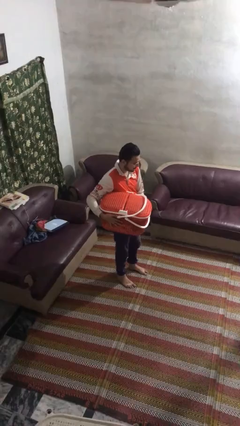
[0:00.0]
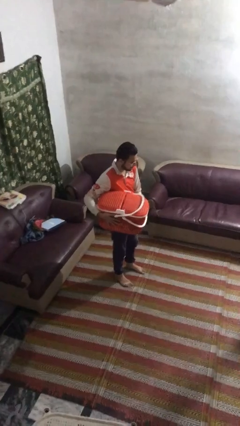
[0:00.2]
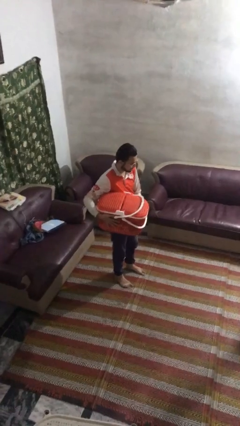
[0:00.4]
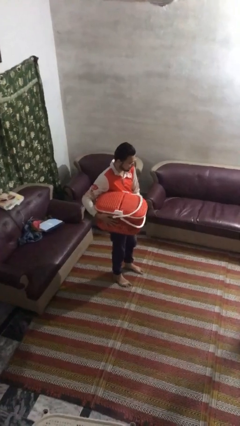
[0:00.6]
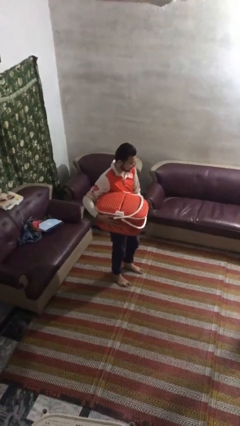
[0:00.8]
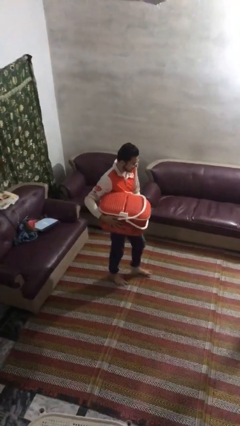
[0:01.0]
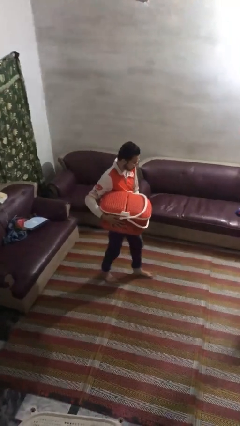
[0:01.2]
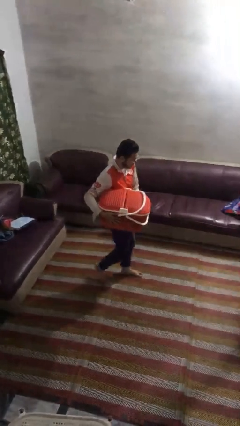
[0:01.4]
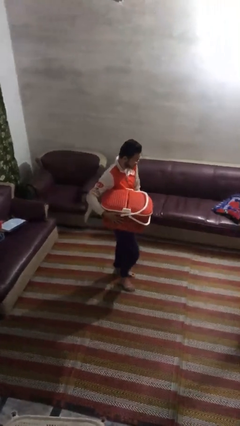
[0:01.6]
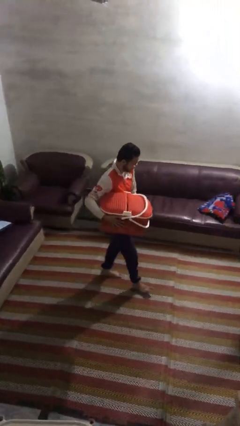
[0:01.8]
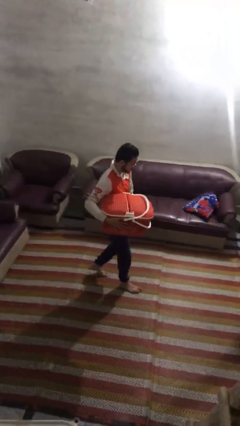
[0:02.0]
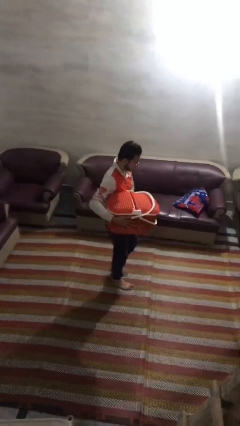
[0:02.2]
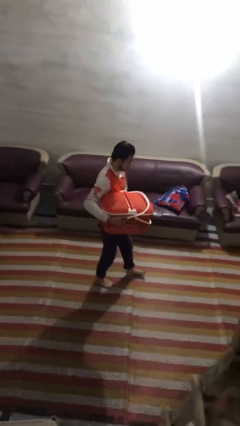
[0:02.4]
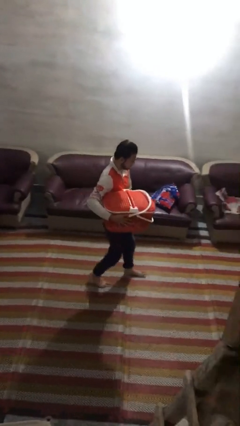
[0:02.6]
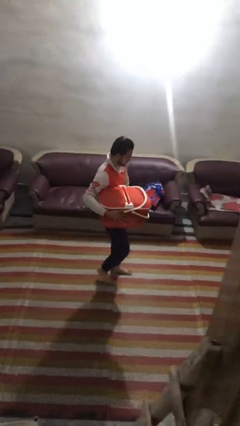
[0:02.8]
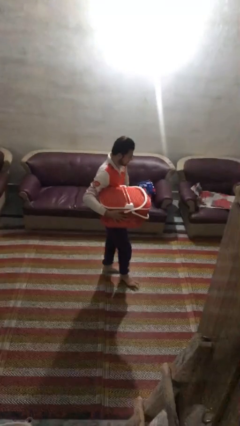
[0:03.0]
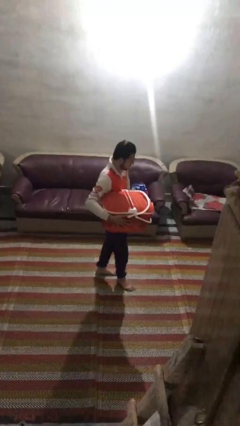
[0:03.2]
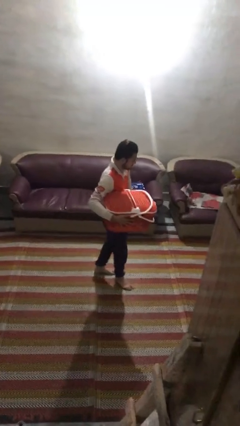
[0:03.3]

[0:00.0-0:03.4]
person carries laundry basket

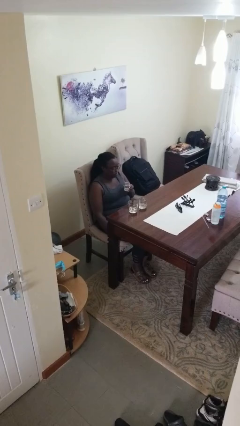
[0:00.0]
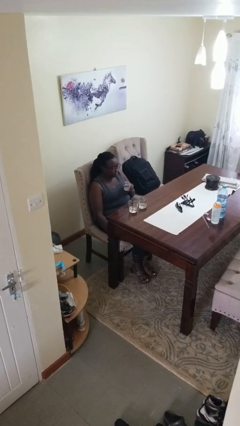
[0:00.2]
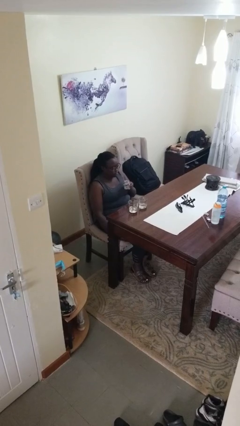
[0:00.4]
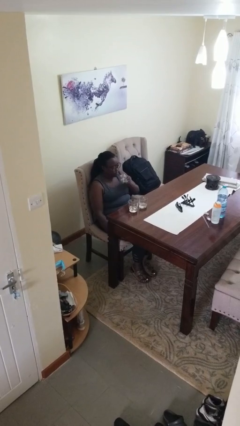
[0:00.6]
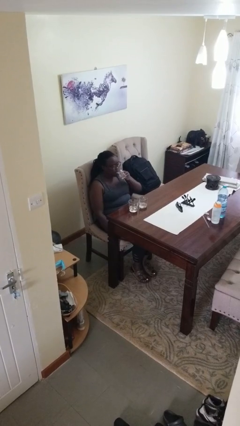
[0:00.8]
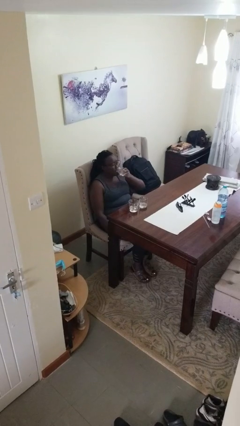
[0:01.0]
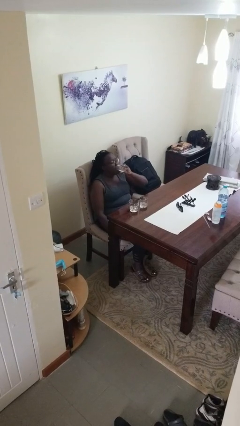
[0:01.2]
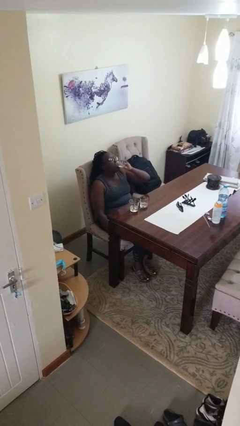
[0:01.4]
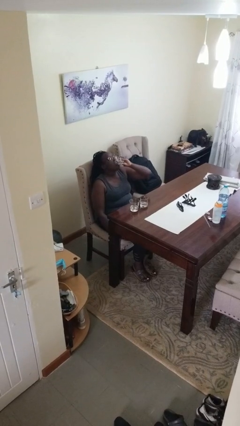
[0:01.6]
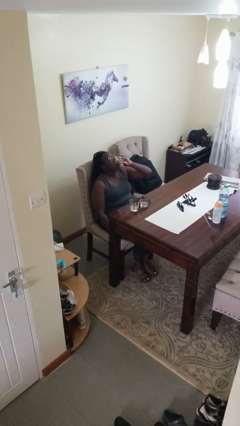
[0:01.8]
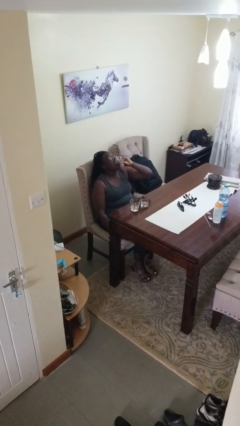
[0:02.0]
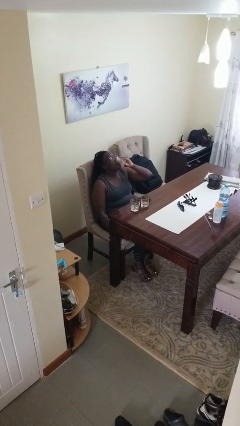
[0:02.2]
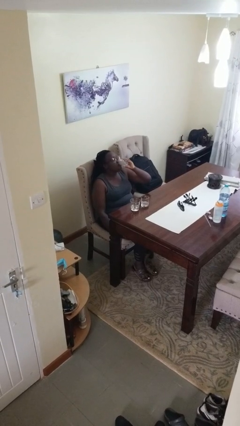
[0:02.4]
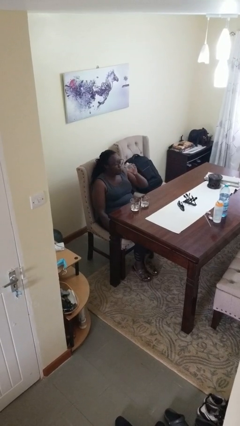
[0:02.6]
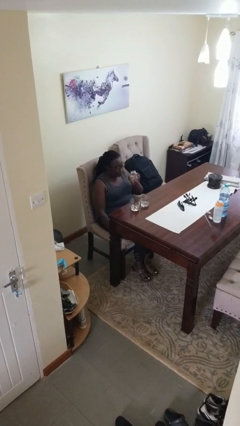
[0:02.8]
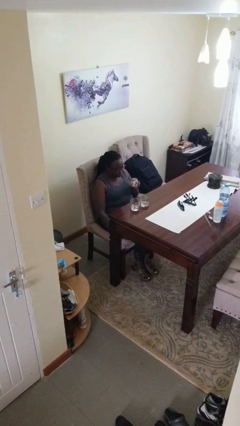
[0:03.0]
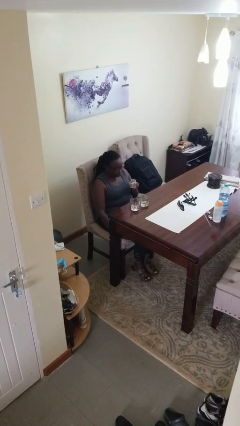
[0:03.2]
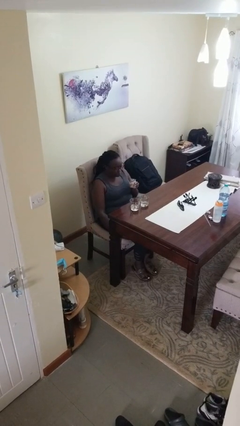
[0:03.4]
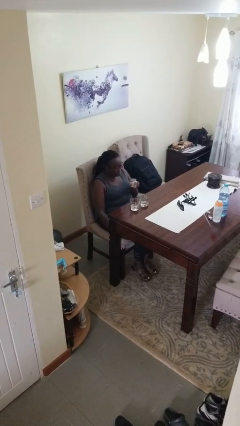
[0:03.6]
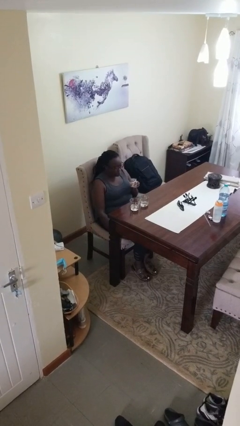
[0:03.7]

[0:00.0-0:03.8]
person drinks from shotglass

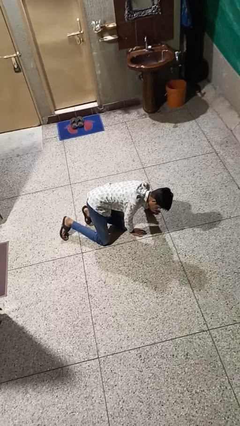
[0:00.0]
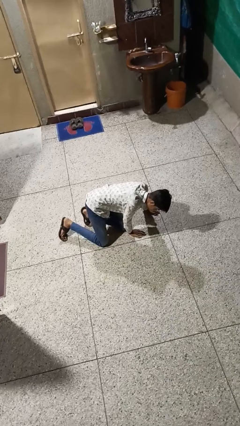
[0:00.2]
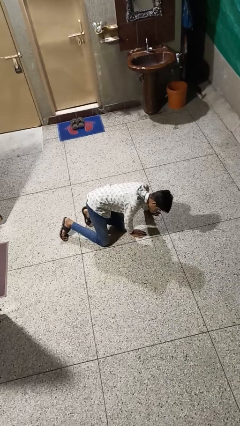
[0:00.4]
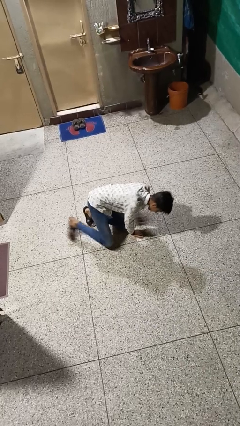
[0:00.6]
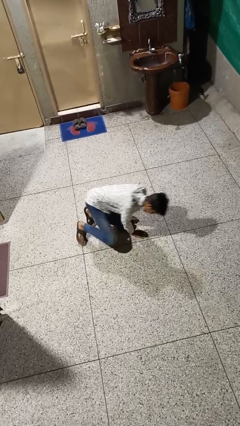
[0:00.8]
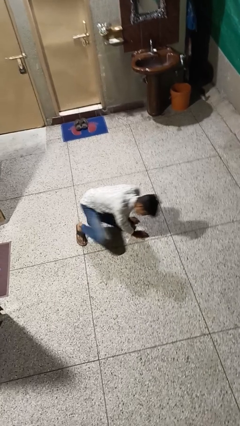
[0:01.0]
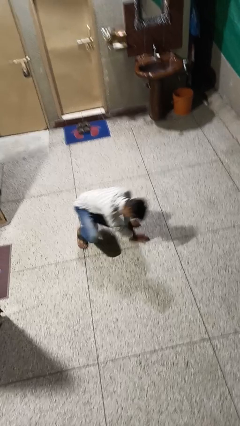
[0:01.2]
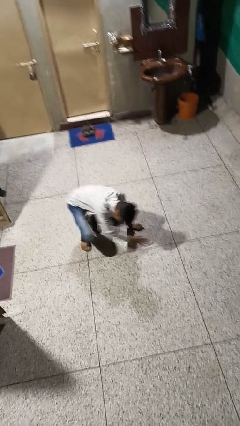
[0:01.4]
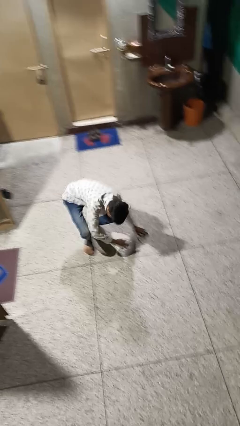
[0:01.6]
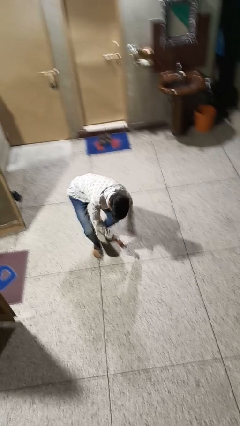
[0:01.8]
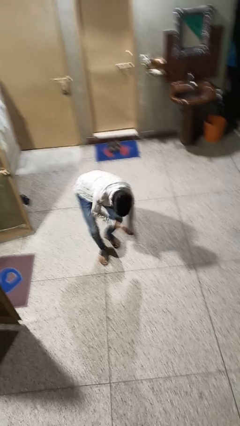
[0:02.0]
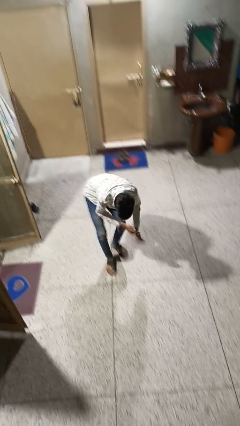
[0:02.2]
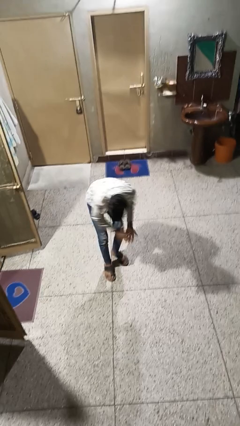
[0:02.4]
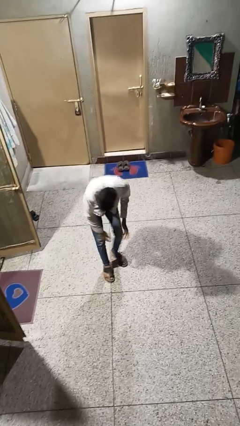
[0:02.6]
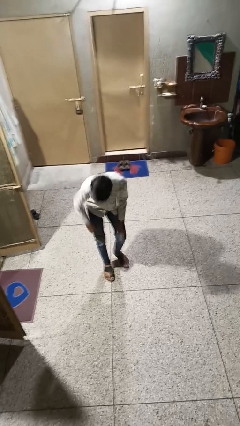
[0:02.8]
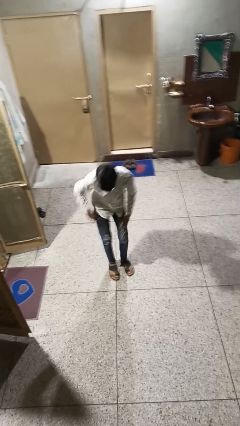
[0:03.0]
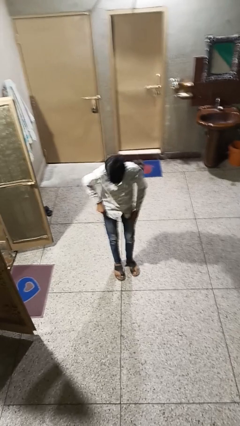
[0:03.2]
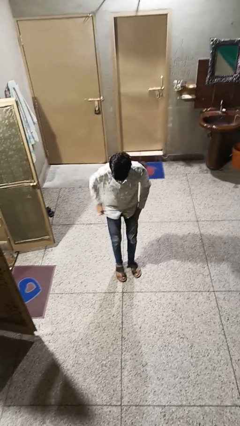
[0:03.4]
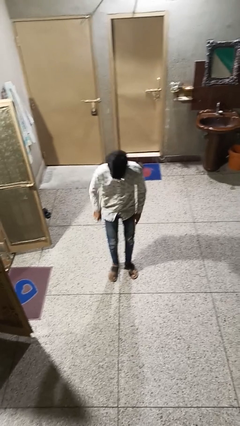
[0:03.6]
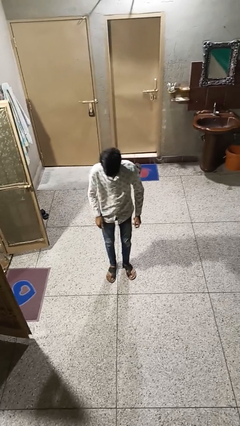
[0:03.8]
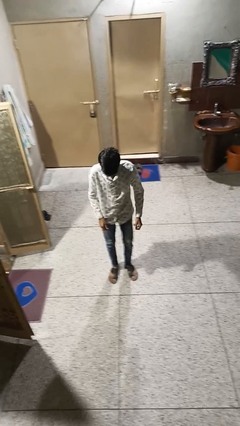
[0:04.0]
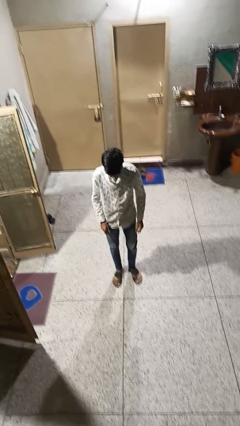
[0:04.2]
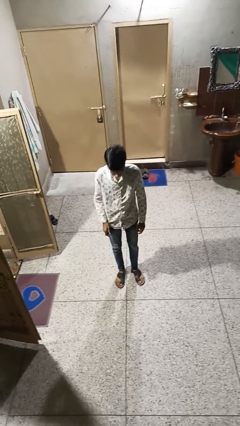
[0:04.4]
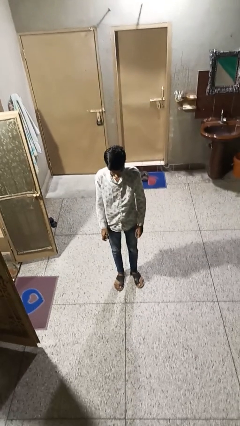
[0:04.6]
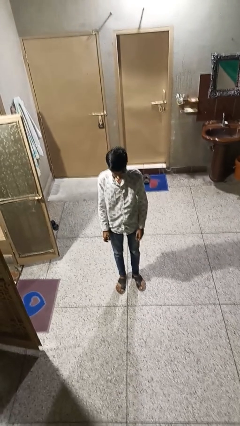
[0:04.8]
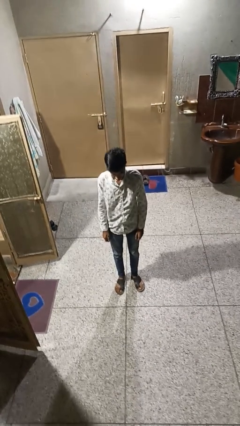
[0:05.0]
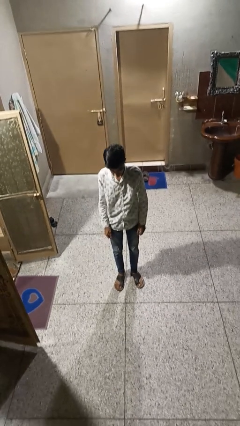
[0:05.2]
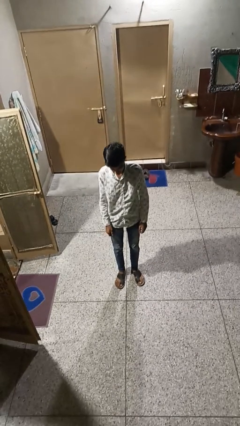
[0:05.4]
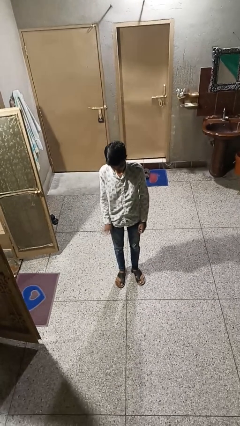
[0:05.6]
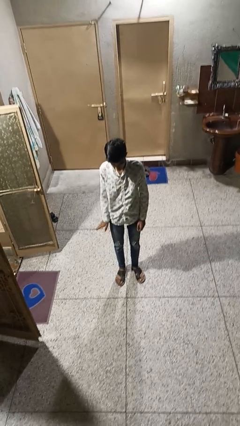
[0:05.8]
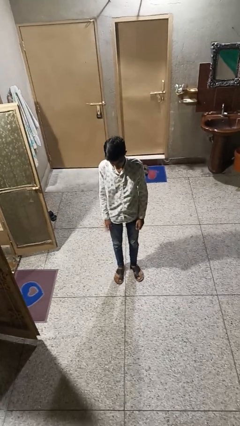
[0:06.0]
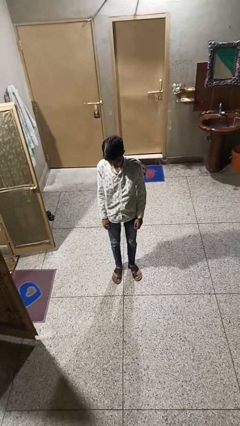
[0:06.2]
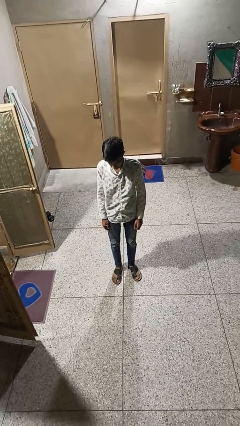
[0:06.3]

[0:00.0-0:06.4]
person stands up from floor

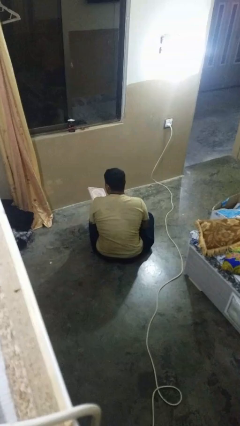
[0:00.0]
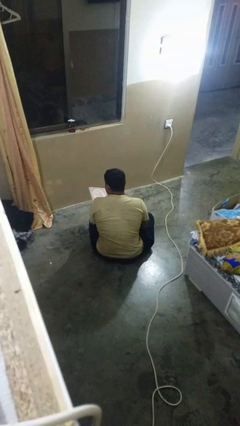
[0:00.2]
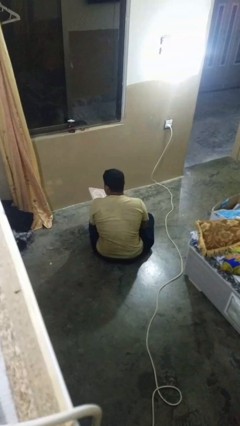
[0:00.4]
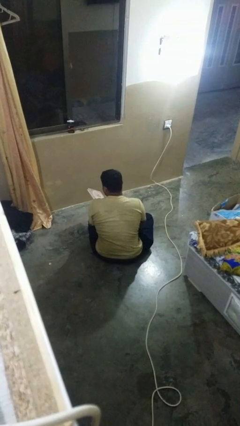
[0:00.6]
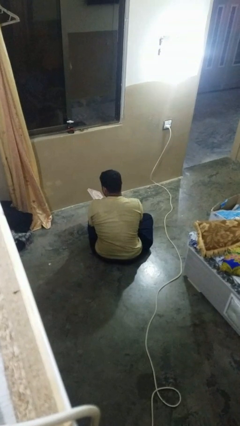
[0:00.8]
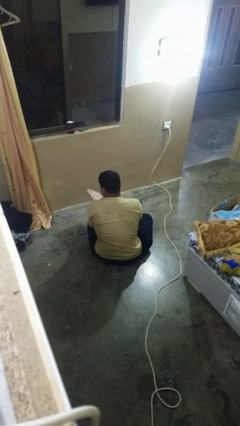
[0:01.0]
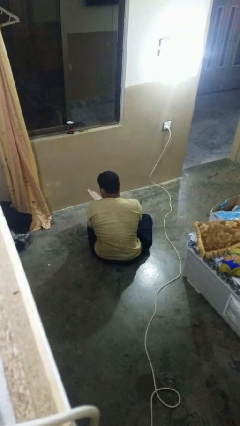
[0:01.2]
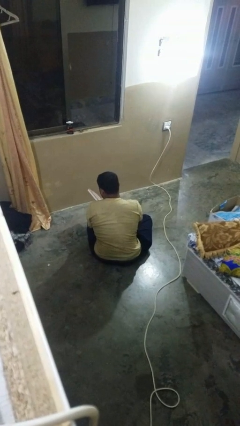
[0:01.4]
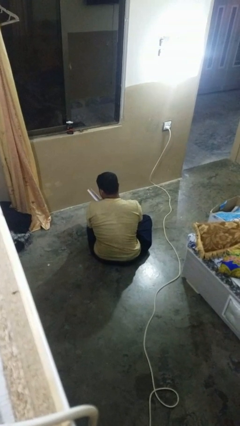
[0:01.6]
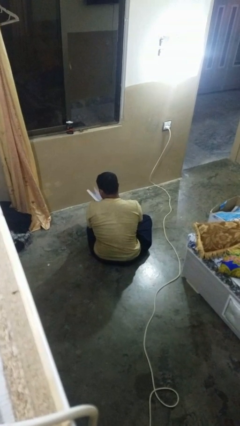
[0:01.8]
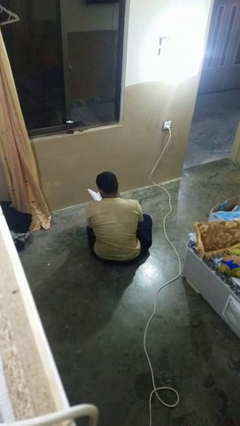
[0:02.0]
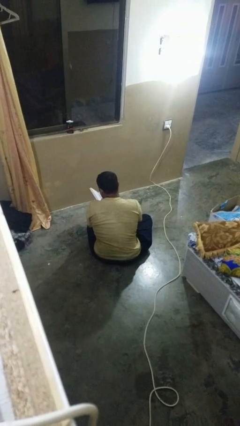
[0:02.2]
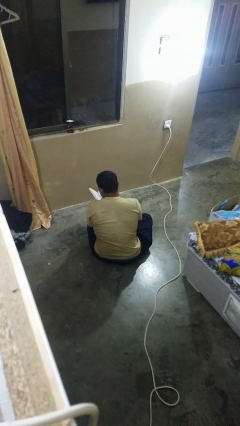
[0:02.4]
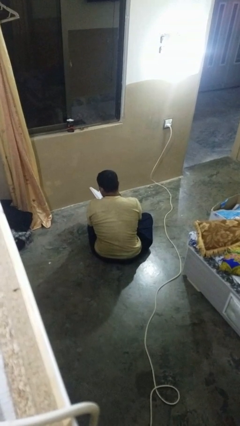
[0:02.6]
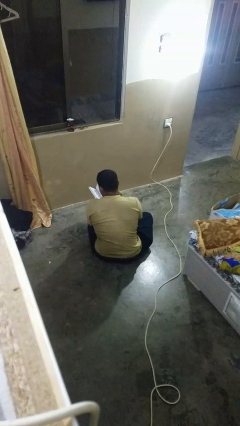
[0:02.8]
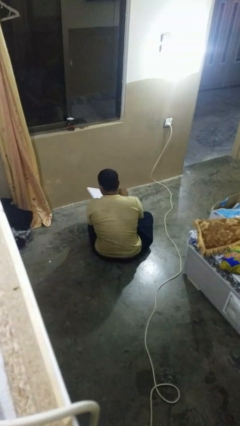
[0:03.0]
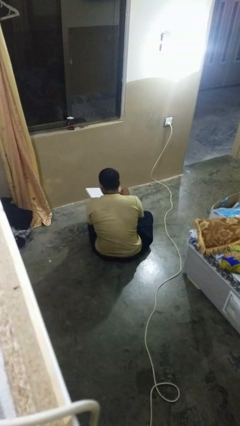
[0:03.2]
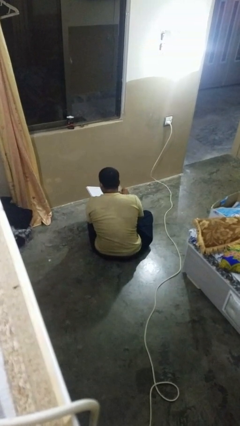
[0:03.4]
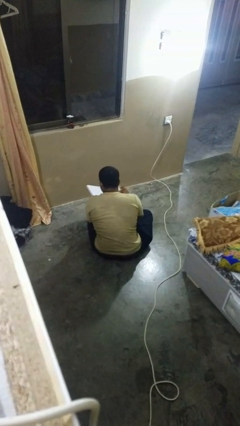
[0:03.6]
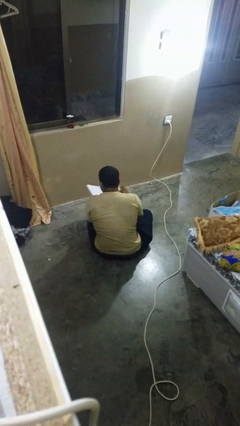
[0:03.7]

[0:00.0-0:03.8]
person reads book
